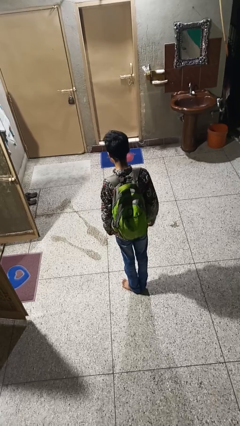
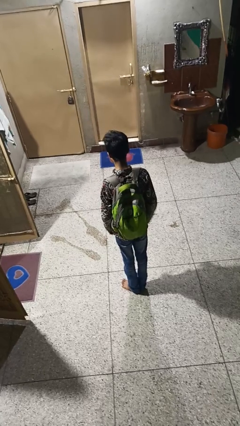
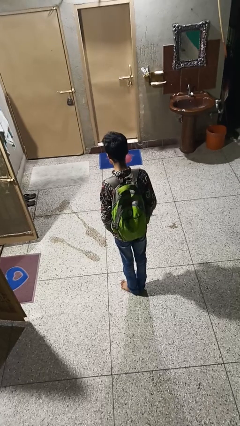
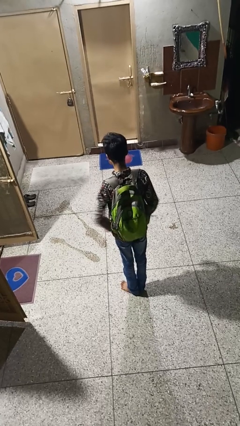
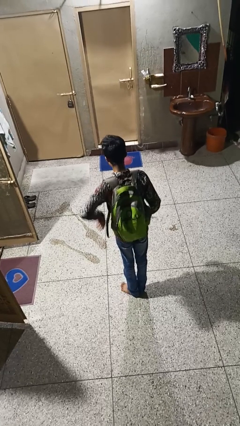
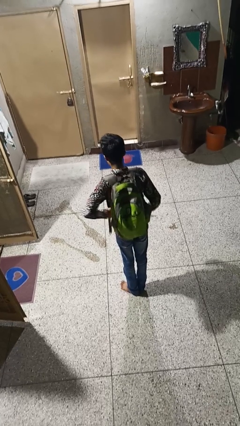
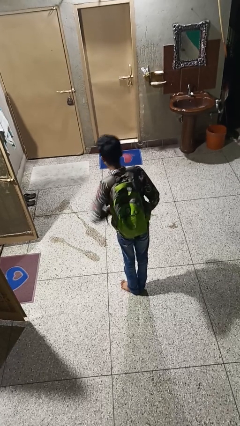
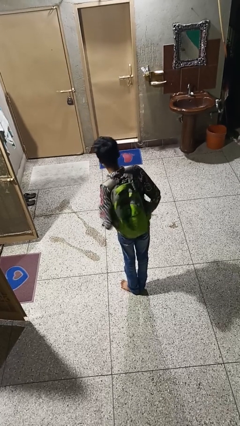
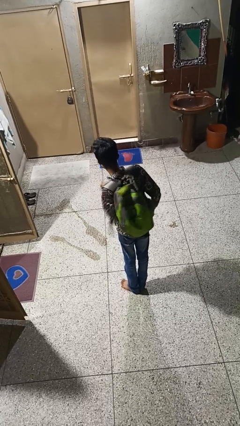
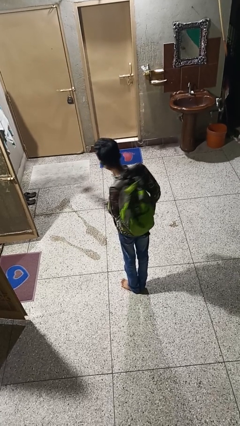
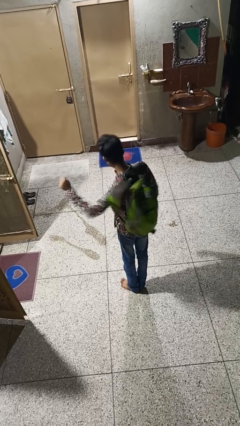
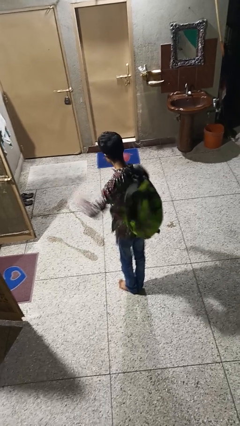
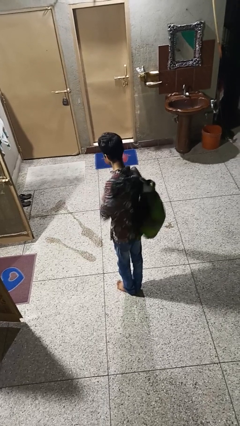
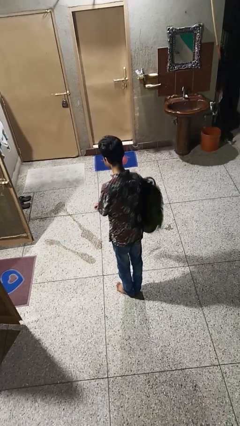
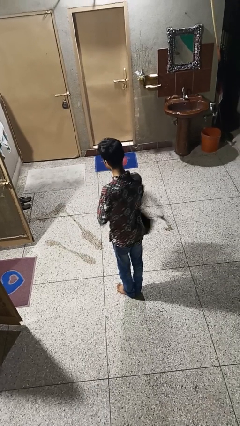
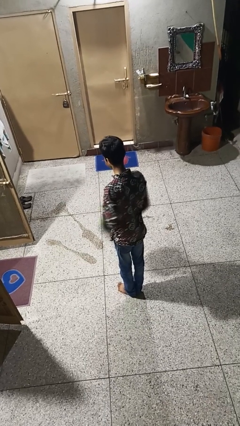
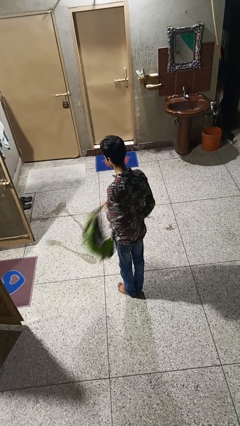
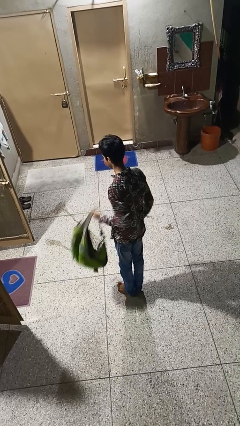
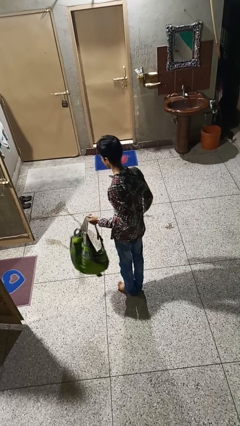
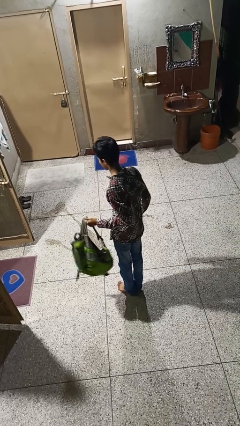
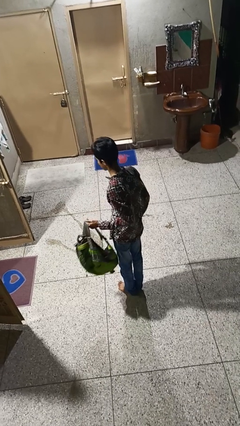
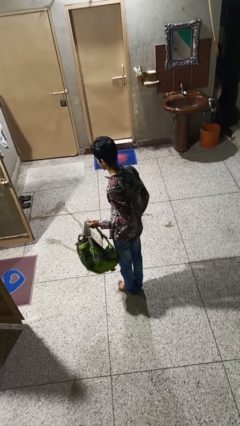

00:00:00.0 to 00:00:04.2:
person takes off backpack

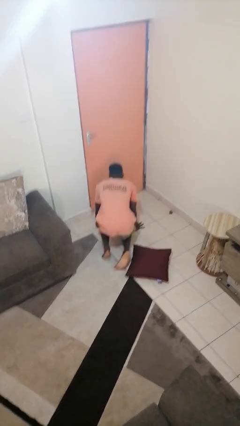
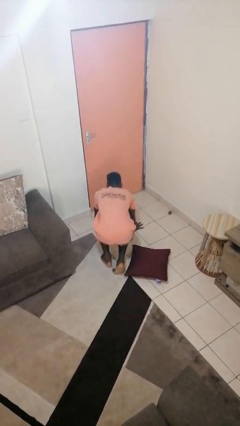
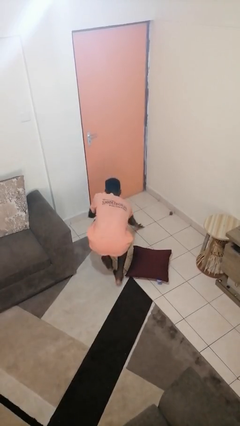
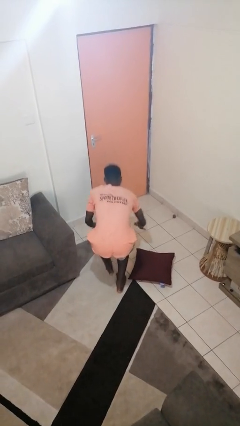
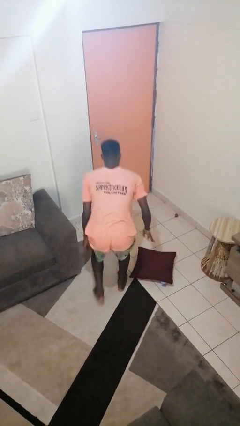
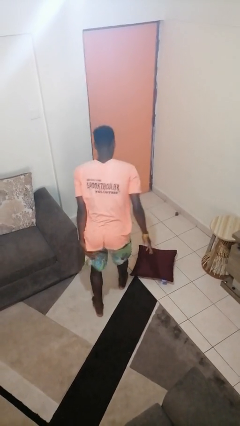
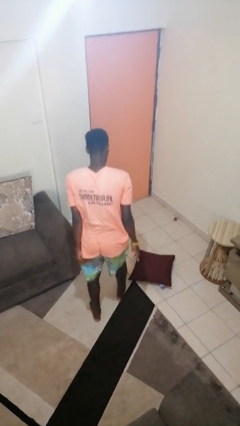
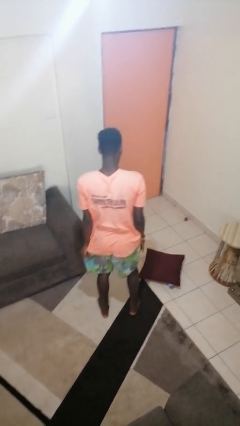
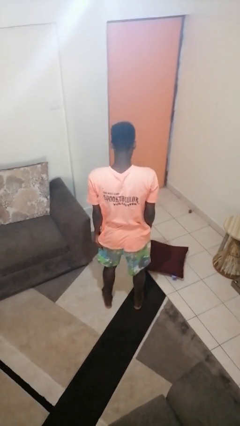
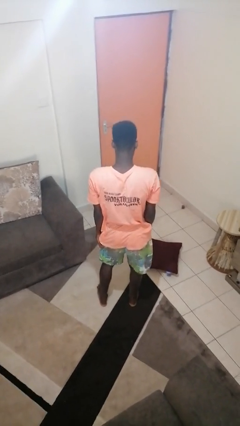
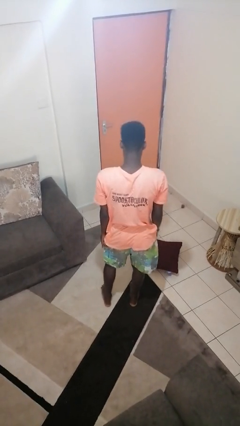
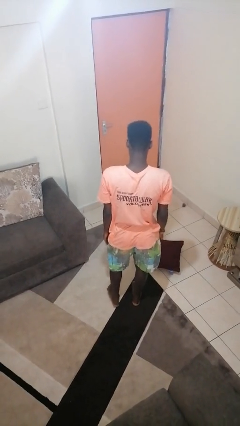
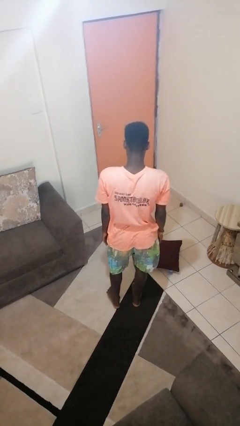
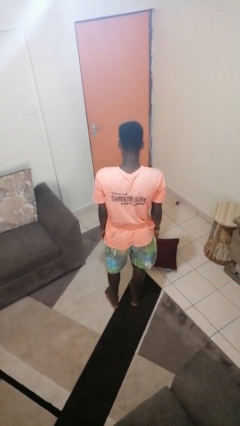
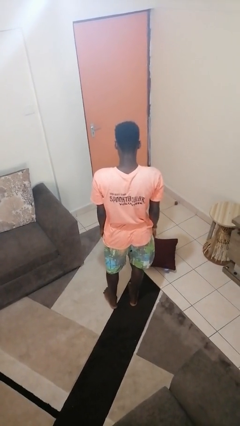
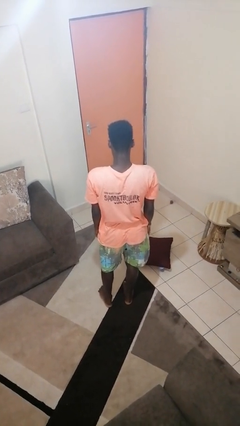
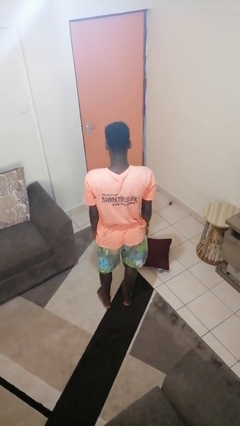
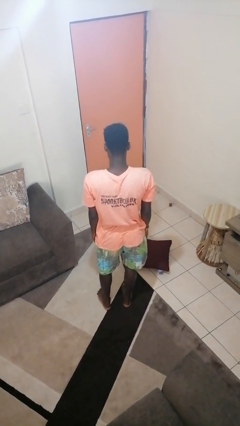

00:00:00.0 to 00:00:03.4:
person stands up from floor

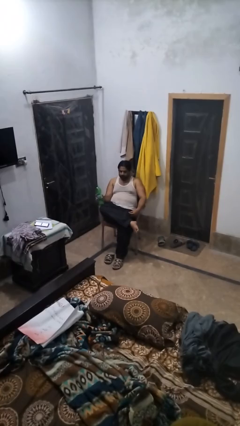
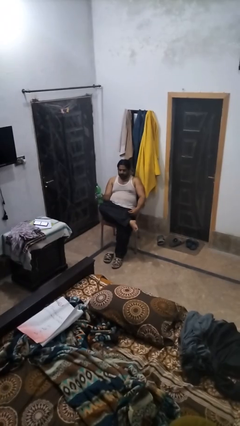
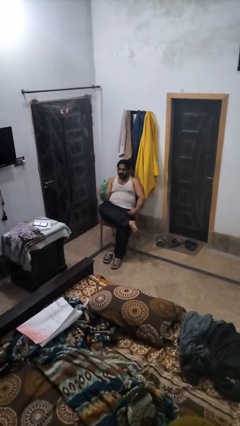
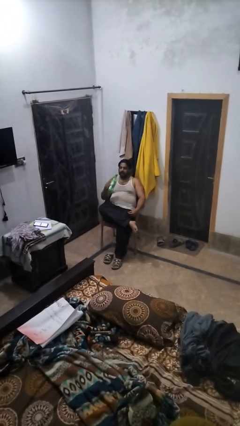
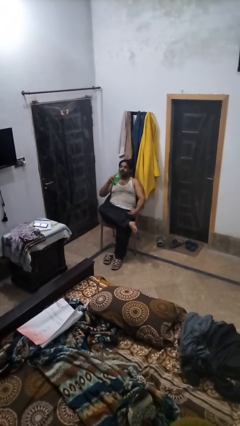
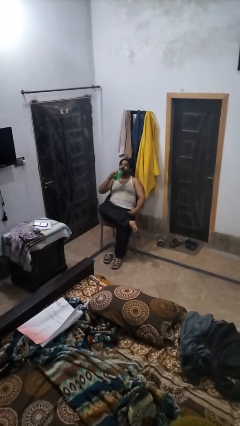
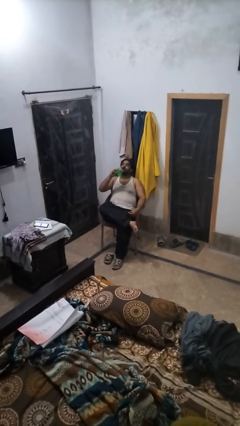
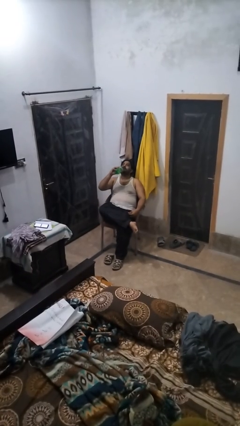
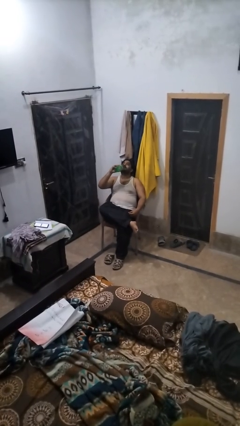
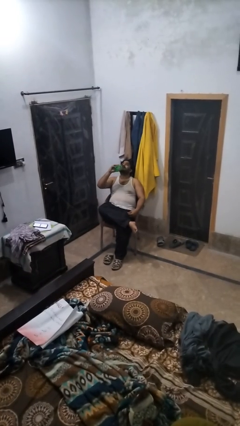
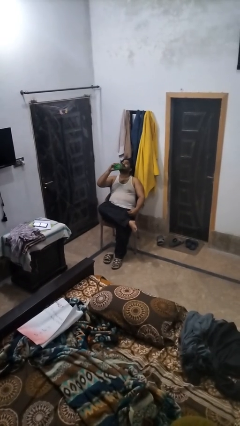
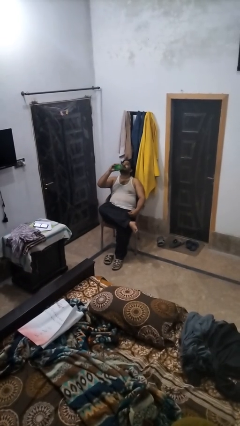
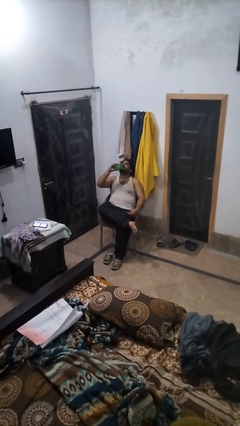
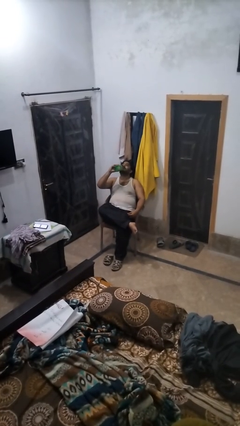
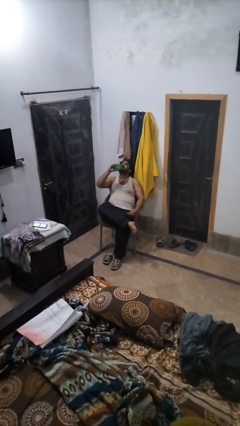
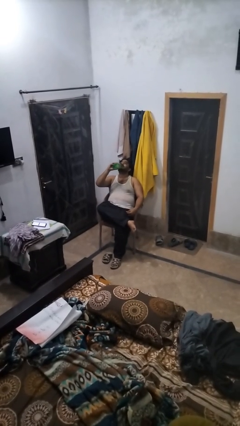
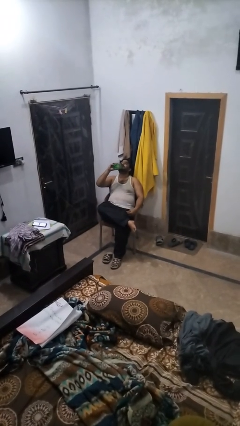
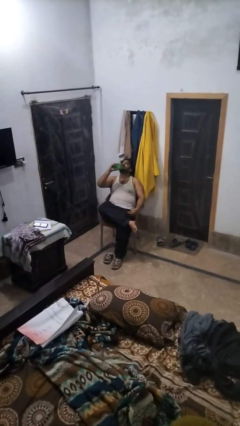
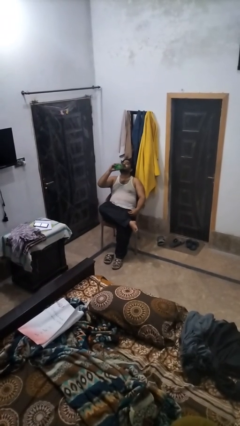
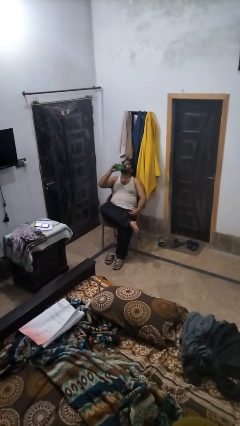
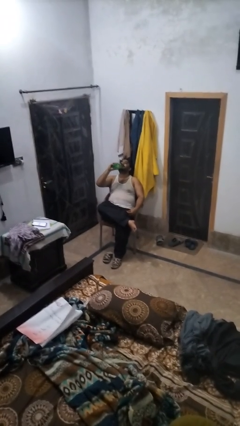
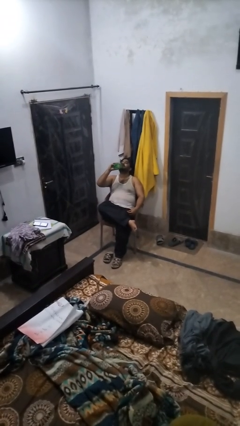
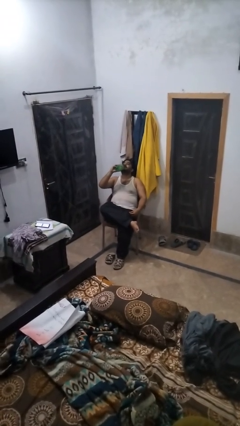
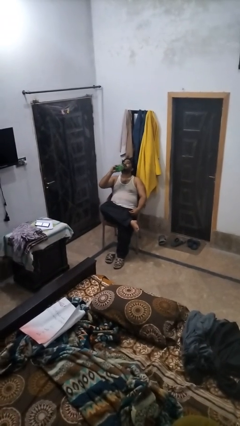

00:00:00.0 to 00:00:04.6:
person drinks from bottle

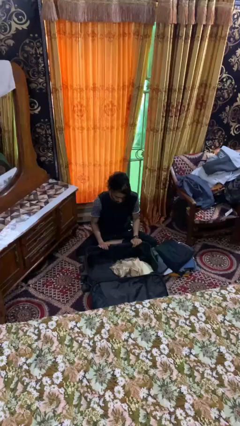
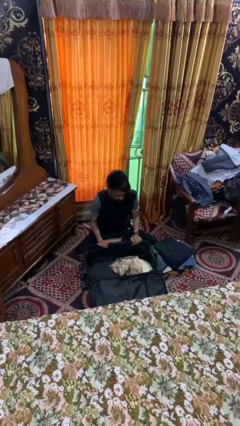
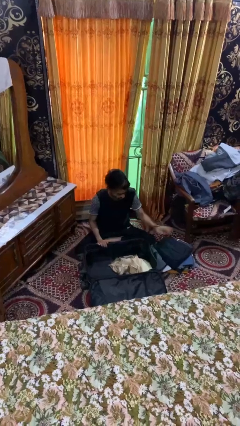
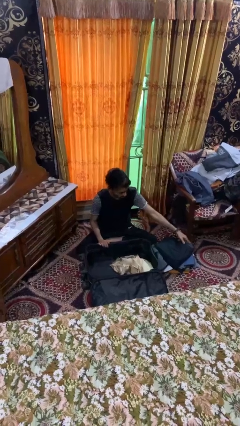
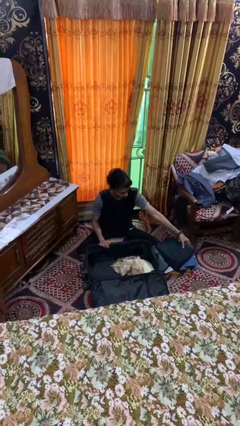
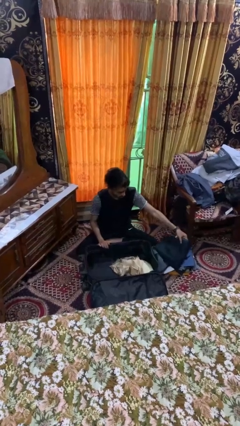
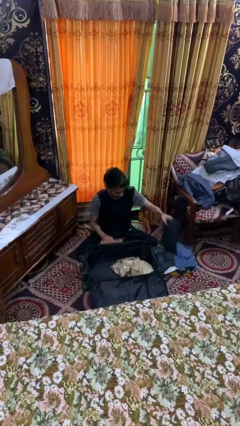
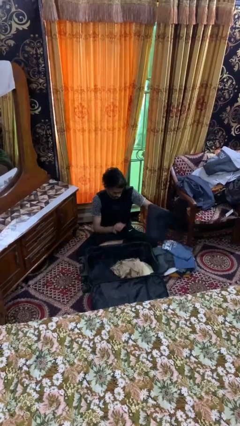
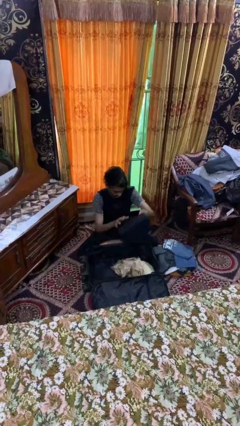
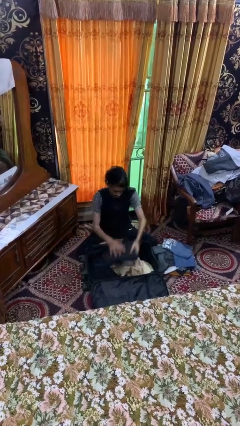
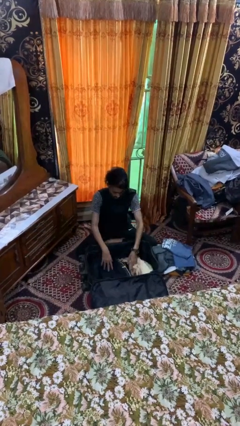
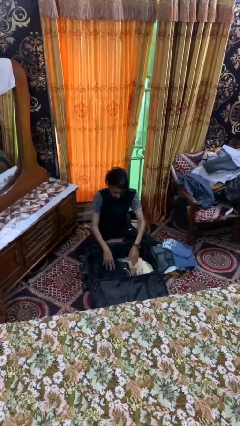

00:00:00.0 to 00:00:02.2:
person loads clothes into suitcase

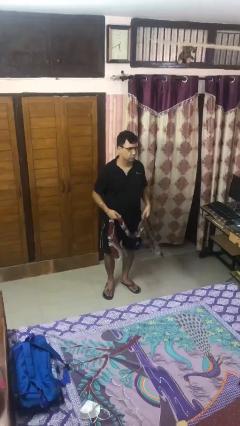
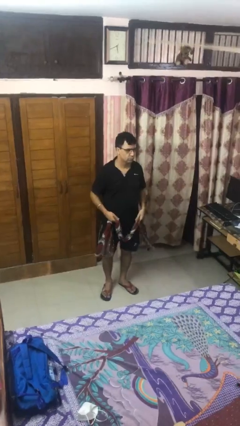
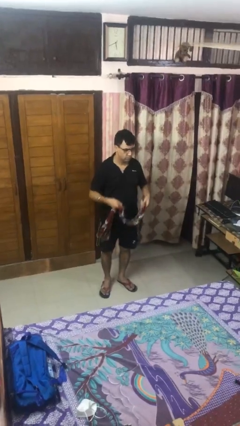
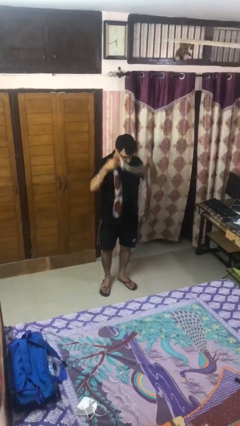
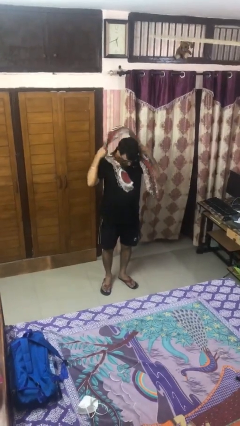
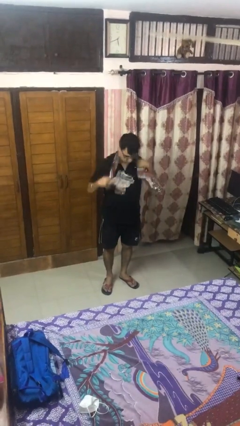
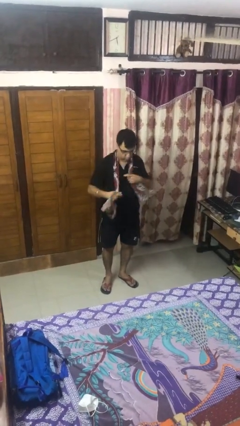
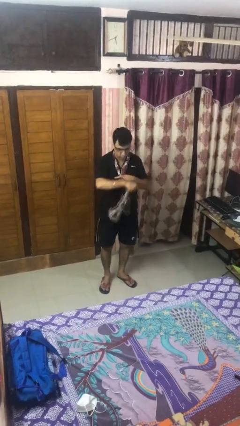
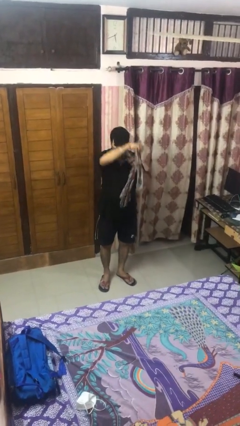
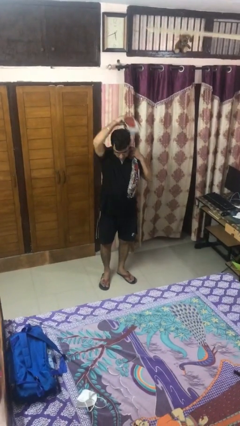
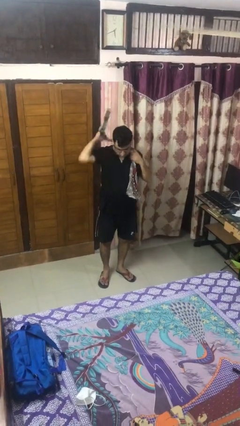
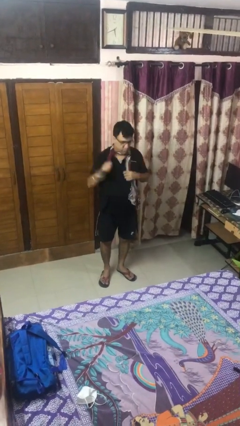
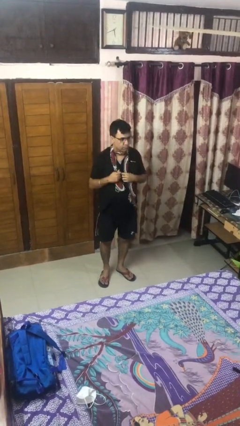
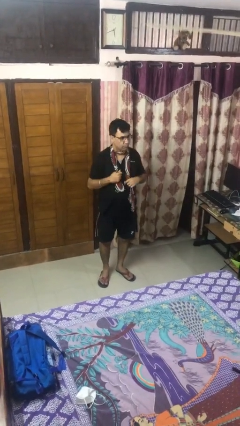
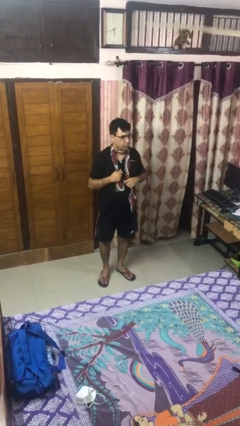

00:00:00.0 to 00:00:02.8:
person puts on scarf

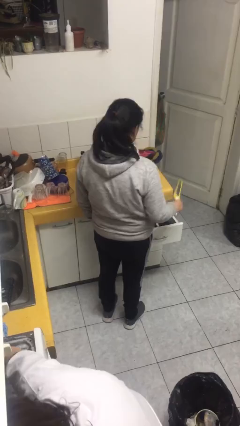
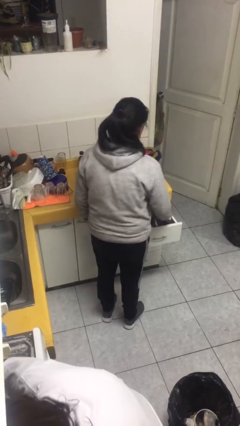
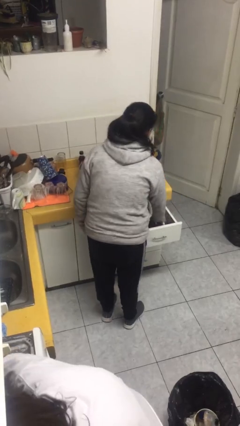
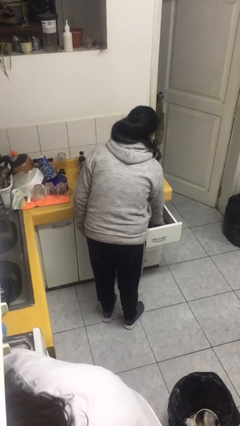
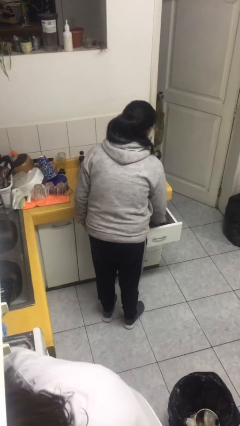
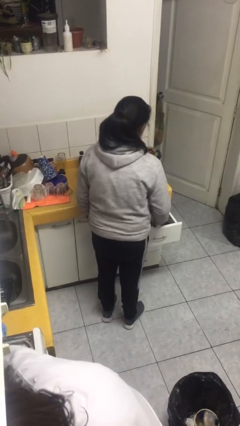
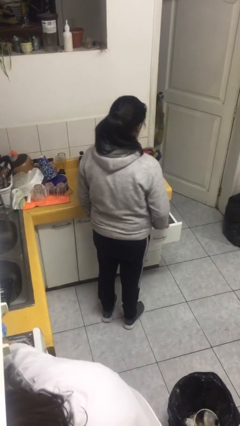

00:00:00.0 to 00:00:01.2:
person puts object into kitchen drawer
